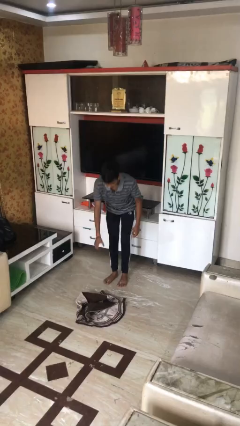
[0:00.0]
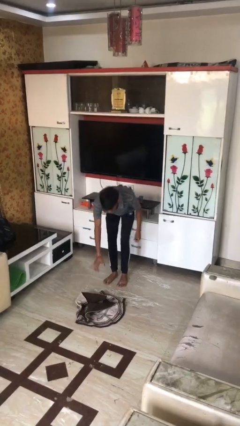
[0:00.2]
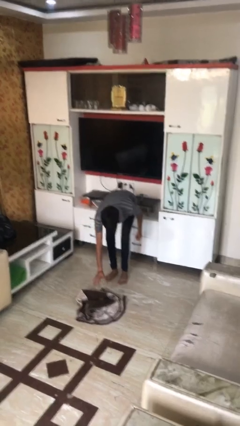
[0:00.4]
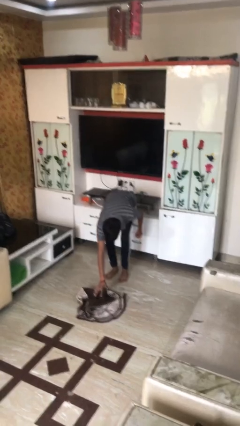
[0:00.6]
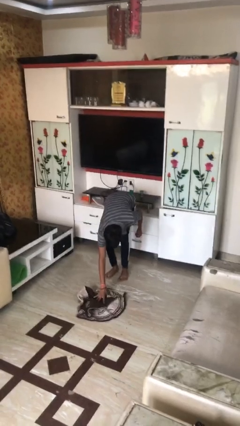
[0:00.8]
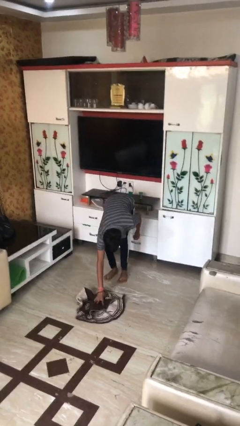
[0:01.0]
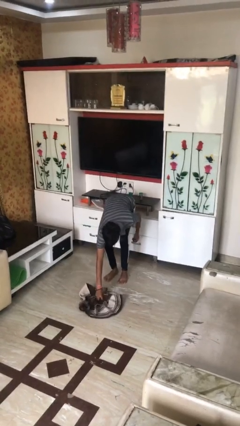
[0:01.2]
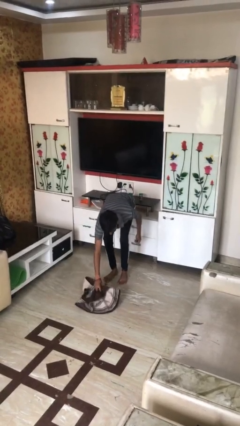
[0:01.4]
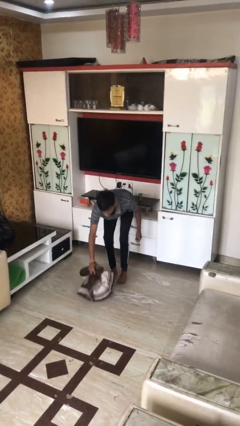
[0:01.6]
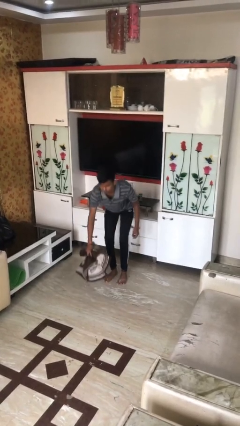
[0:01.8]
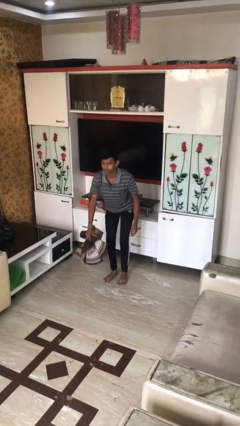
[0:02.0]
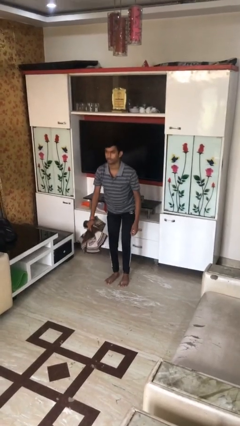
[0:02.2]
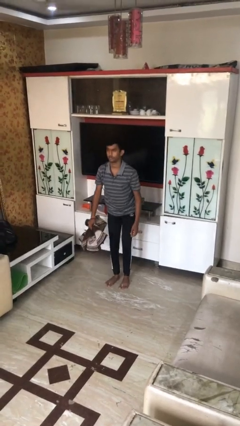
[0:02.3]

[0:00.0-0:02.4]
person picks up object from floor

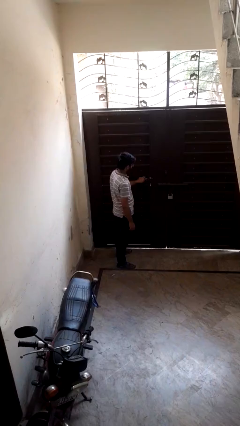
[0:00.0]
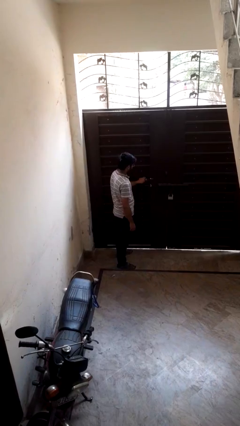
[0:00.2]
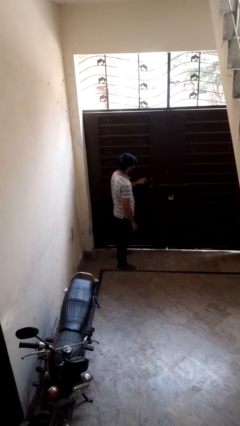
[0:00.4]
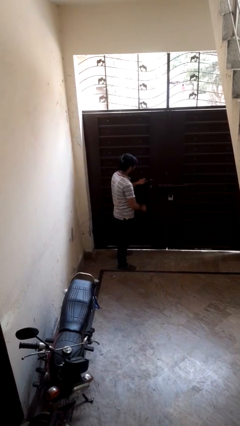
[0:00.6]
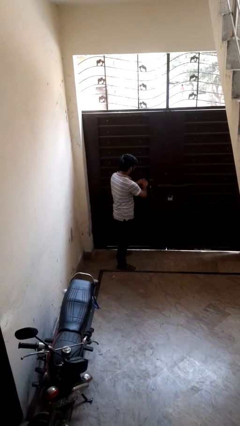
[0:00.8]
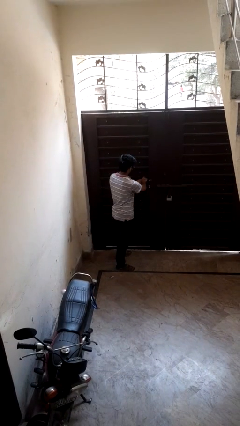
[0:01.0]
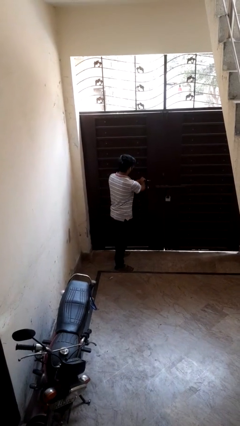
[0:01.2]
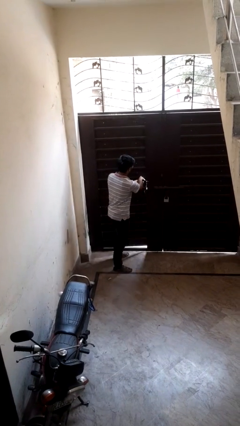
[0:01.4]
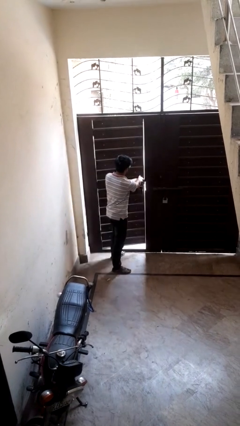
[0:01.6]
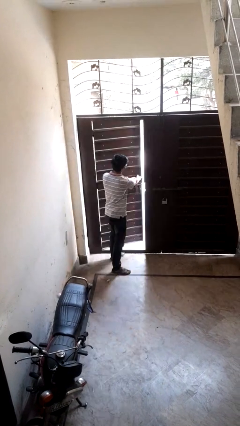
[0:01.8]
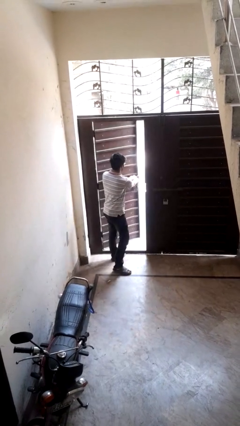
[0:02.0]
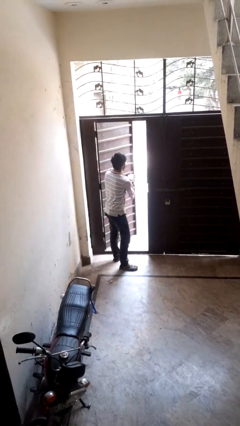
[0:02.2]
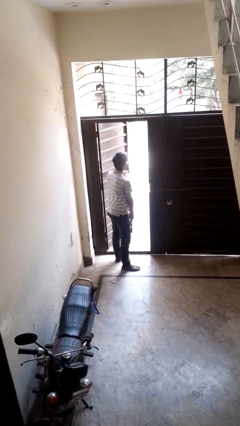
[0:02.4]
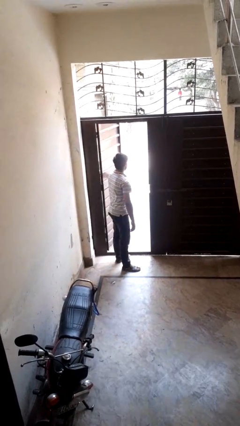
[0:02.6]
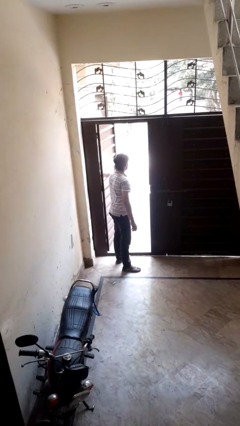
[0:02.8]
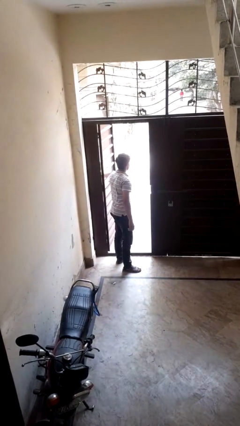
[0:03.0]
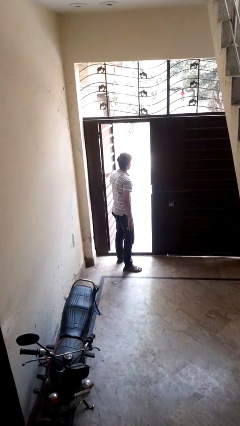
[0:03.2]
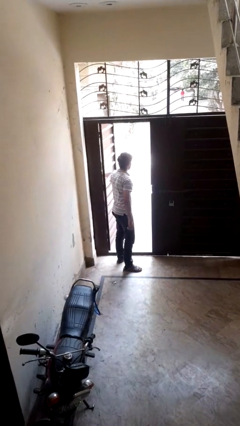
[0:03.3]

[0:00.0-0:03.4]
person opens facility door

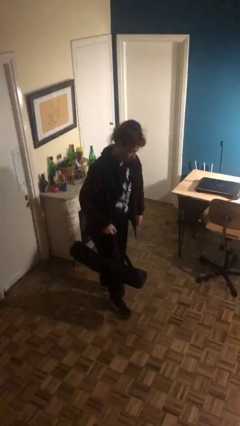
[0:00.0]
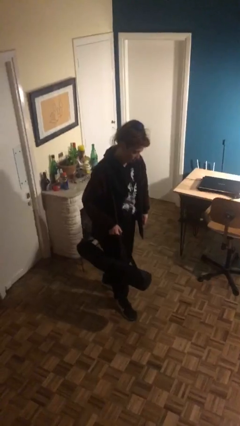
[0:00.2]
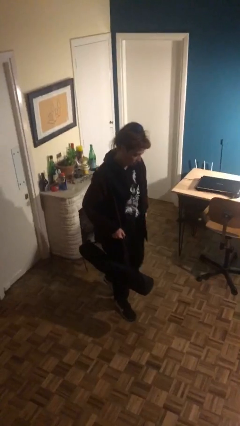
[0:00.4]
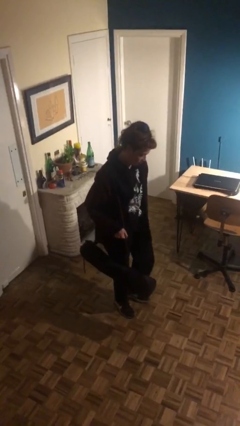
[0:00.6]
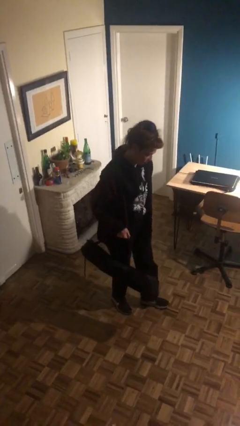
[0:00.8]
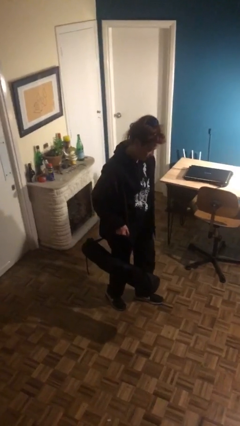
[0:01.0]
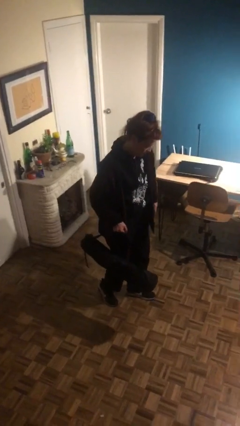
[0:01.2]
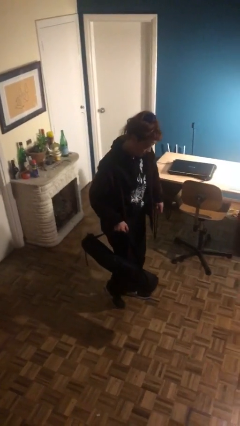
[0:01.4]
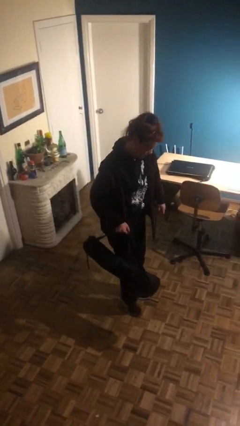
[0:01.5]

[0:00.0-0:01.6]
person carries heavy object

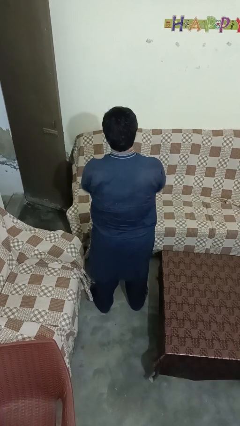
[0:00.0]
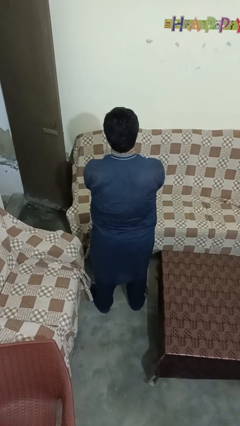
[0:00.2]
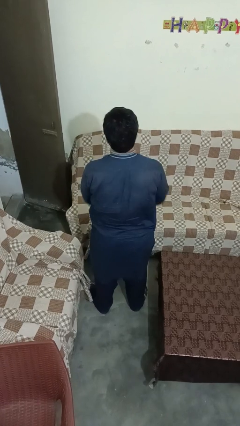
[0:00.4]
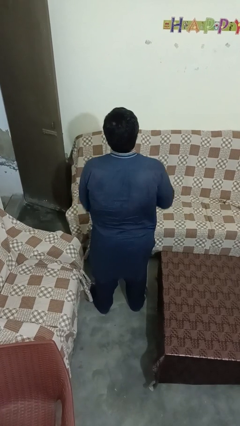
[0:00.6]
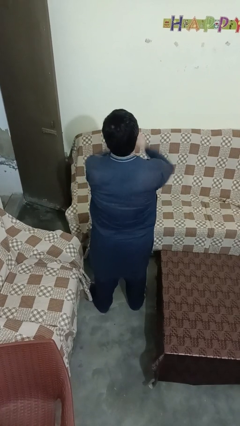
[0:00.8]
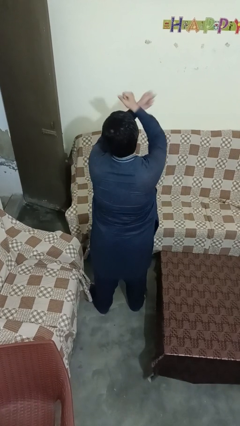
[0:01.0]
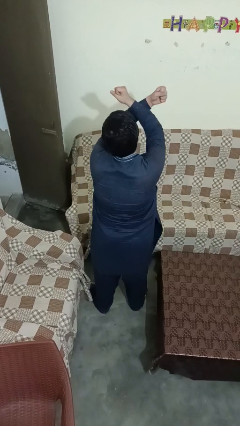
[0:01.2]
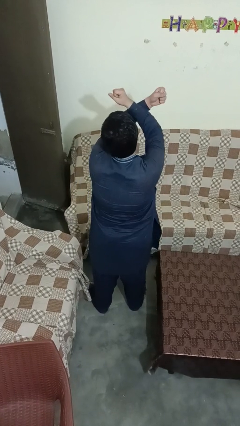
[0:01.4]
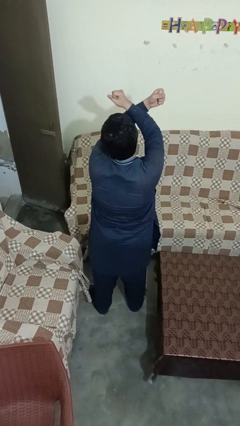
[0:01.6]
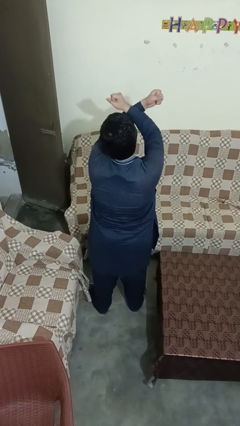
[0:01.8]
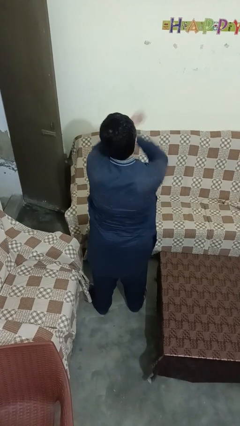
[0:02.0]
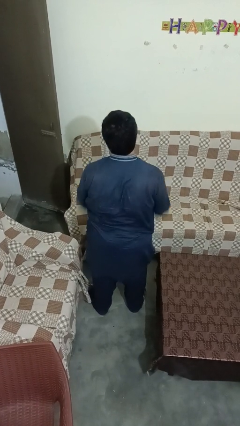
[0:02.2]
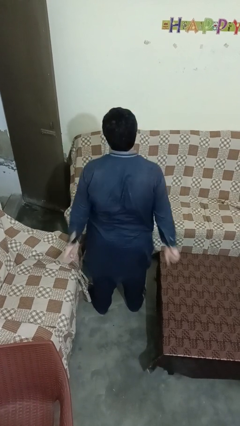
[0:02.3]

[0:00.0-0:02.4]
person gestures arms x

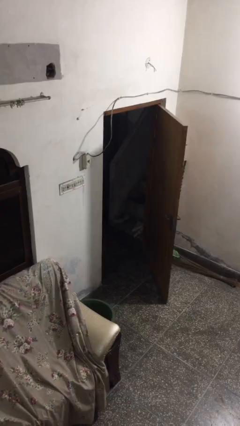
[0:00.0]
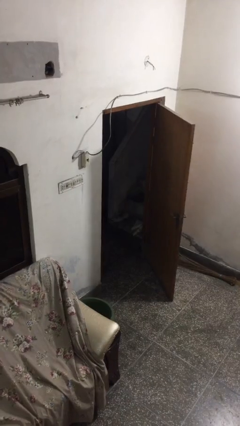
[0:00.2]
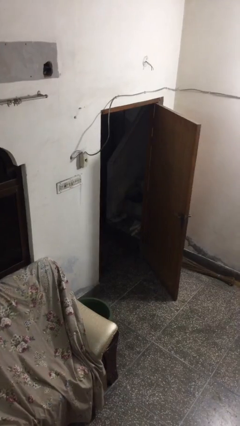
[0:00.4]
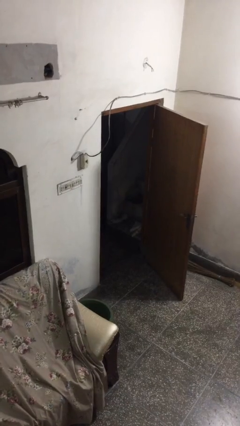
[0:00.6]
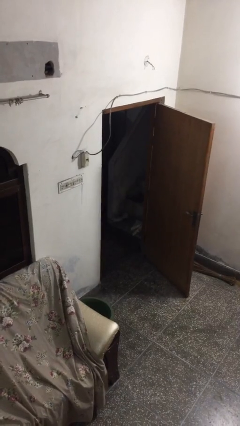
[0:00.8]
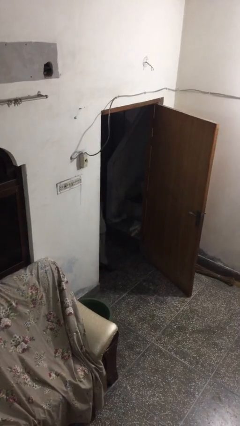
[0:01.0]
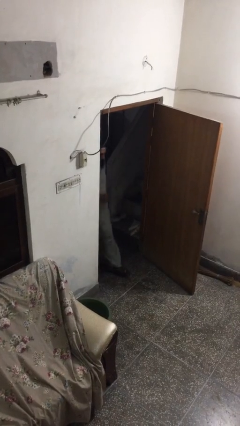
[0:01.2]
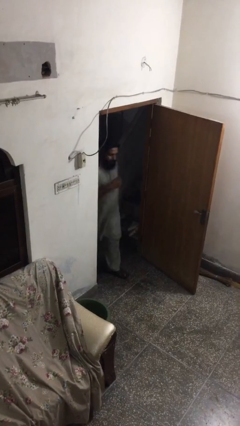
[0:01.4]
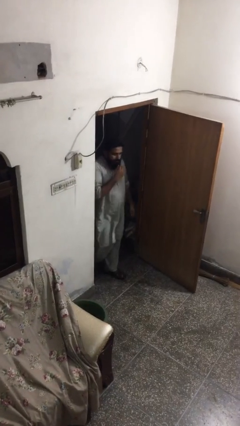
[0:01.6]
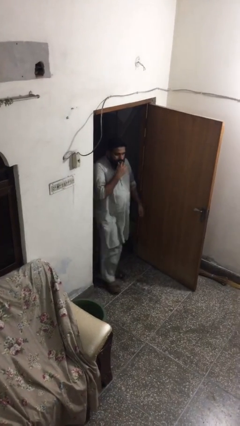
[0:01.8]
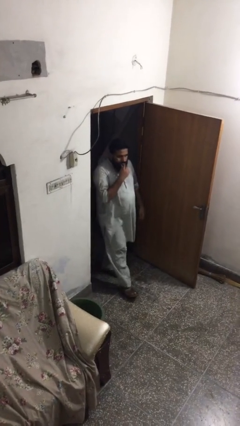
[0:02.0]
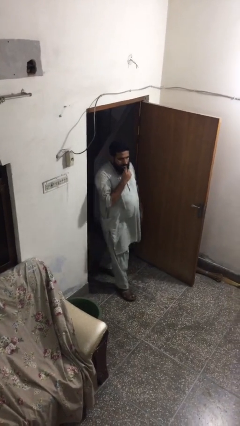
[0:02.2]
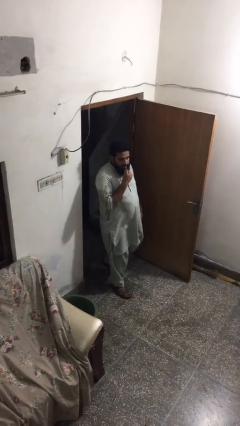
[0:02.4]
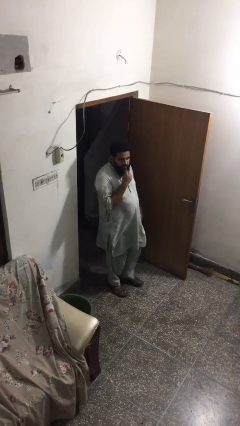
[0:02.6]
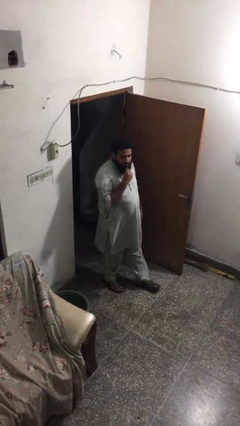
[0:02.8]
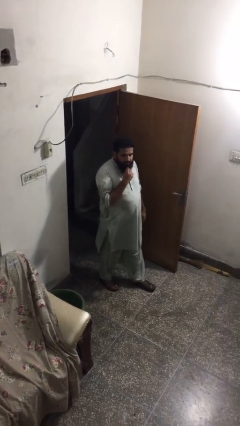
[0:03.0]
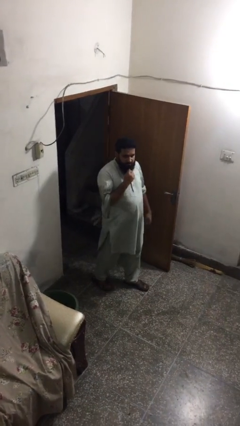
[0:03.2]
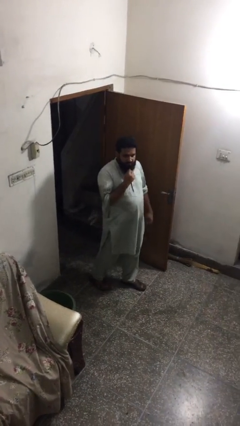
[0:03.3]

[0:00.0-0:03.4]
person enters scene through structure

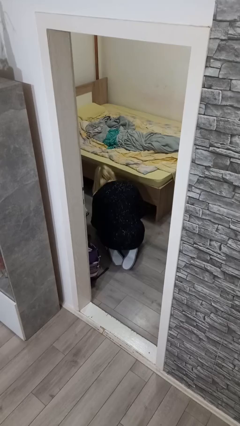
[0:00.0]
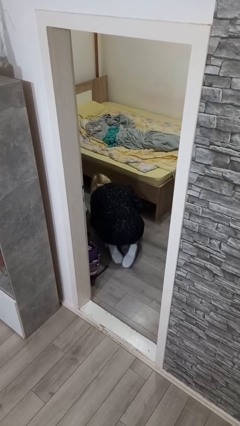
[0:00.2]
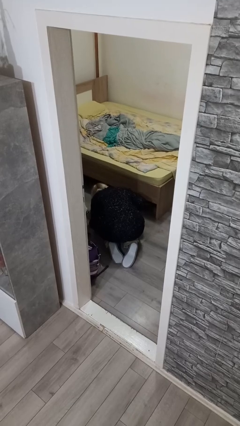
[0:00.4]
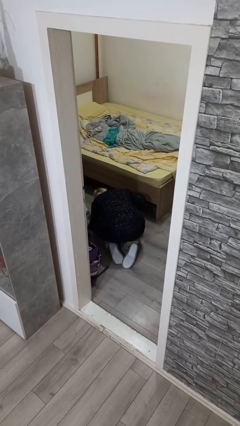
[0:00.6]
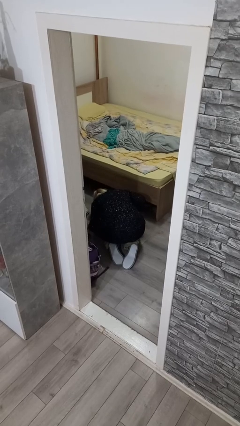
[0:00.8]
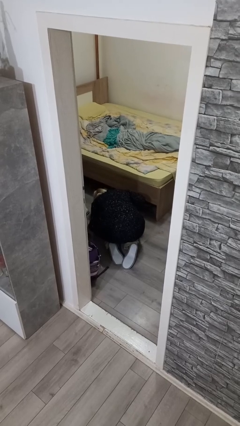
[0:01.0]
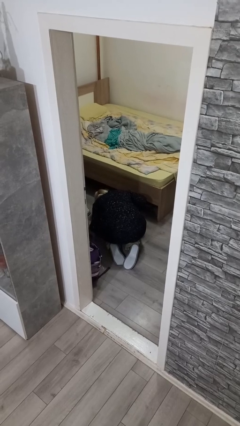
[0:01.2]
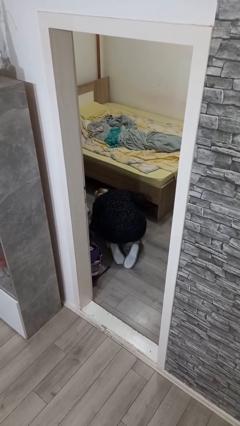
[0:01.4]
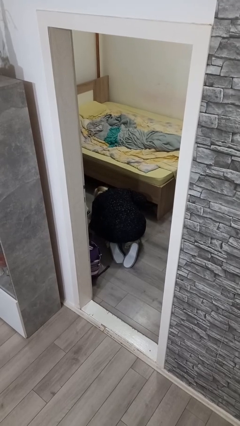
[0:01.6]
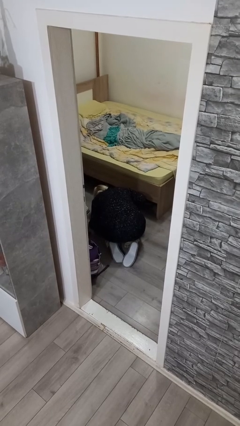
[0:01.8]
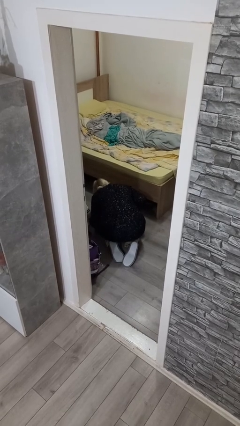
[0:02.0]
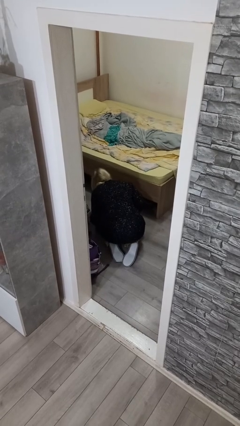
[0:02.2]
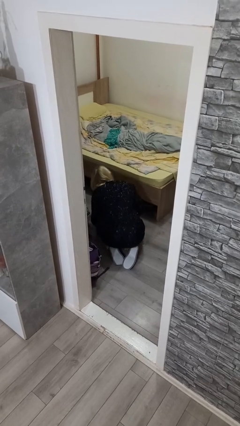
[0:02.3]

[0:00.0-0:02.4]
person searches under bed

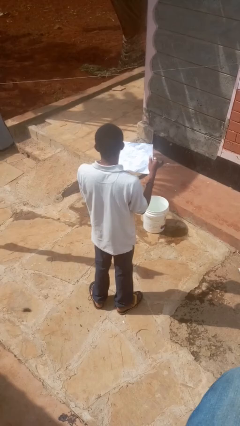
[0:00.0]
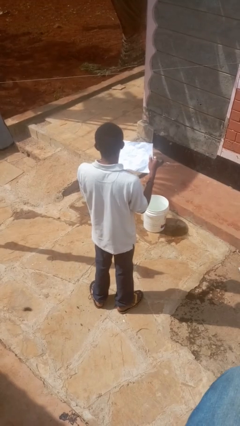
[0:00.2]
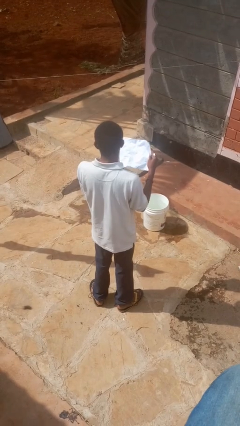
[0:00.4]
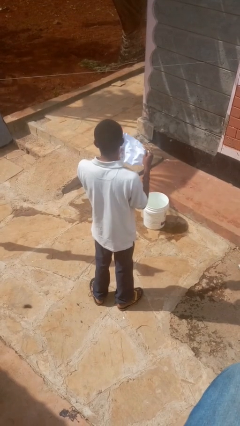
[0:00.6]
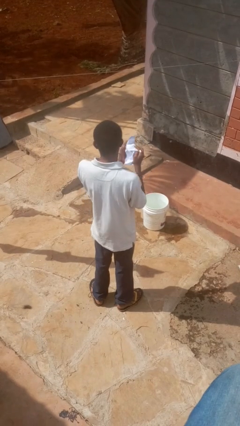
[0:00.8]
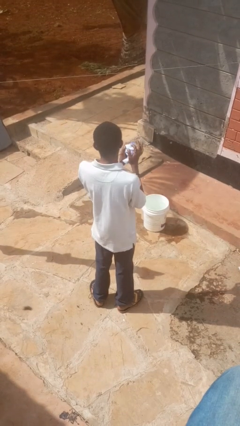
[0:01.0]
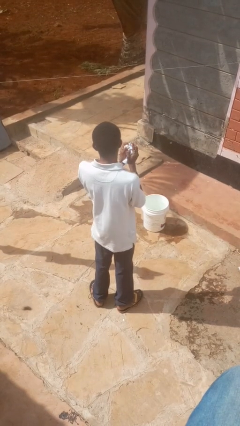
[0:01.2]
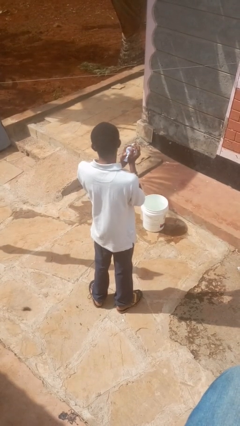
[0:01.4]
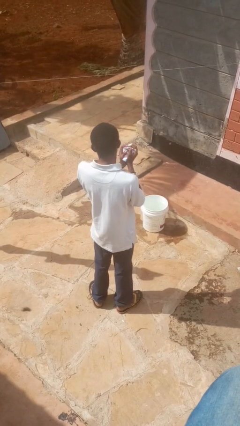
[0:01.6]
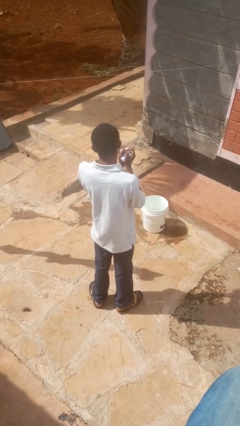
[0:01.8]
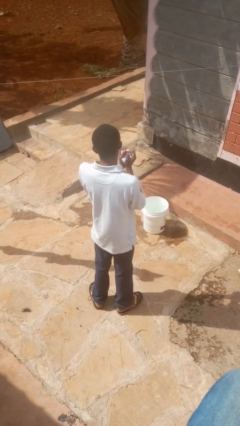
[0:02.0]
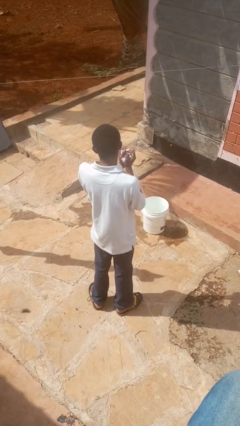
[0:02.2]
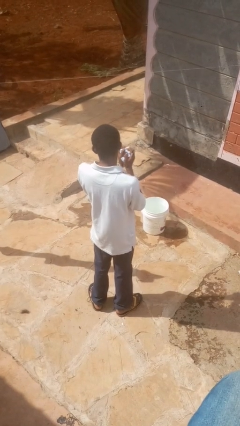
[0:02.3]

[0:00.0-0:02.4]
person crumples paper
